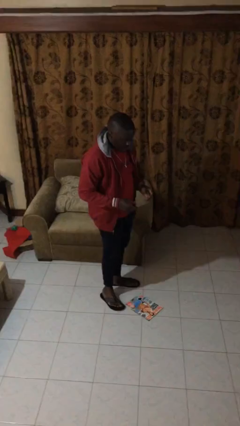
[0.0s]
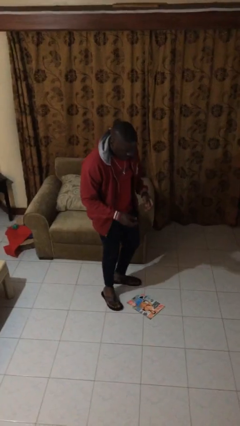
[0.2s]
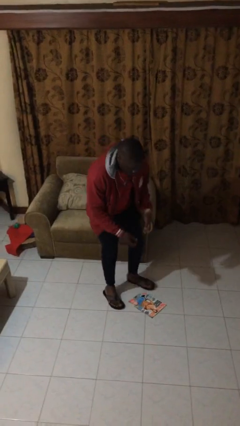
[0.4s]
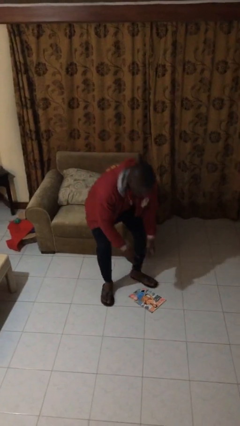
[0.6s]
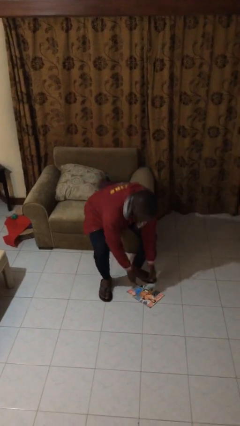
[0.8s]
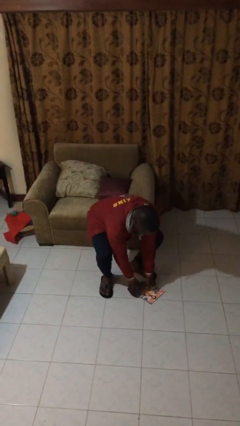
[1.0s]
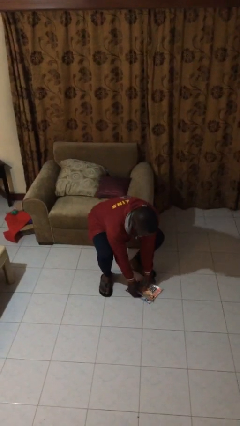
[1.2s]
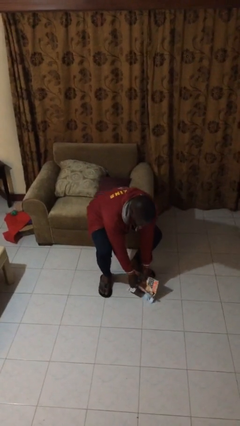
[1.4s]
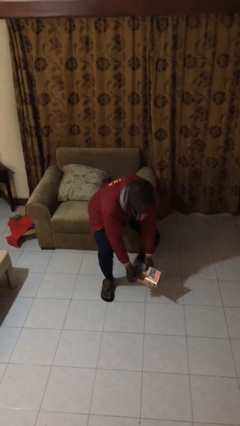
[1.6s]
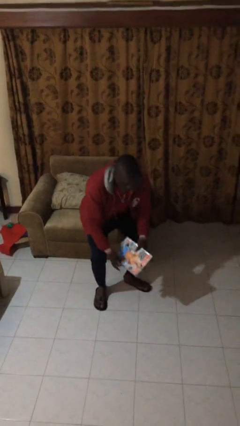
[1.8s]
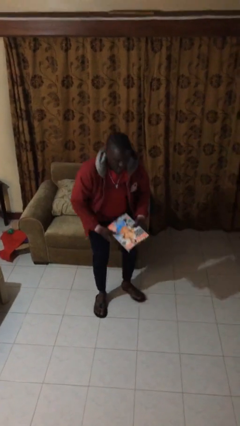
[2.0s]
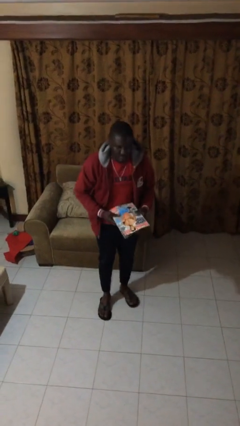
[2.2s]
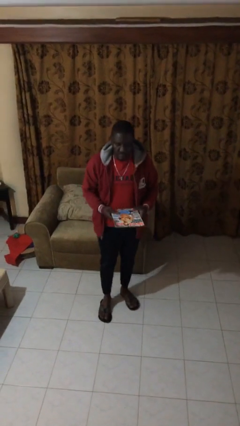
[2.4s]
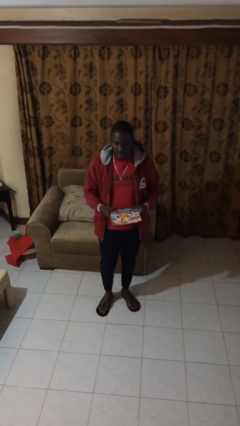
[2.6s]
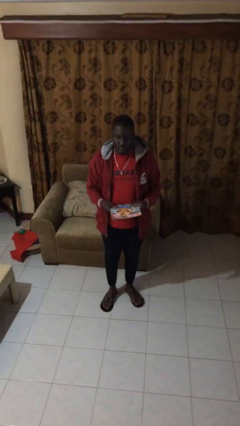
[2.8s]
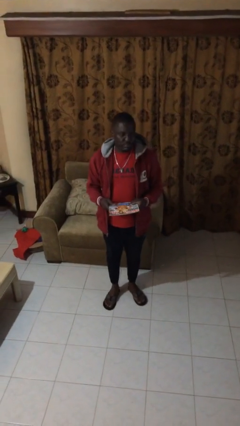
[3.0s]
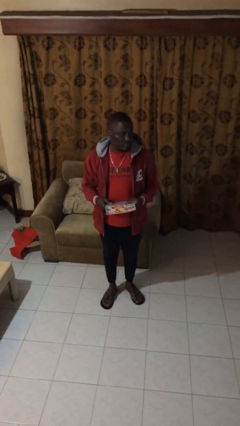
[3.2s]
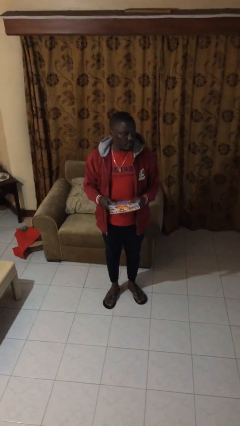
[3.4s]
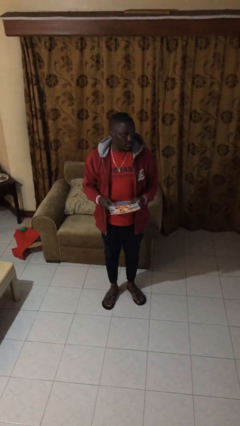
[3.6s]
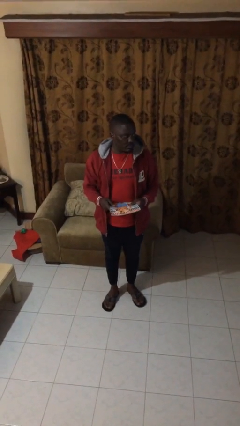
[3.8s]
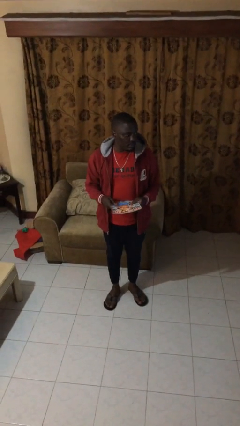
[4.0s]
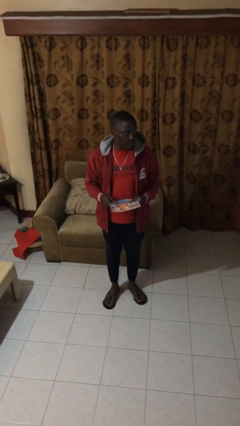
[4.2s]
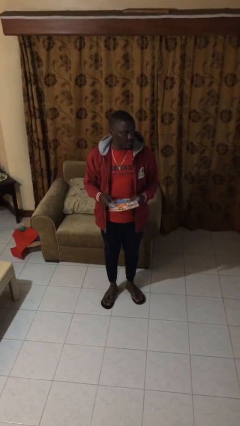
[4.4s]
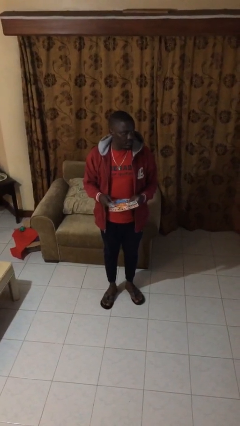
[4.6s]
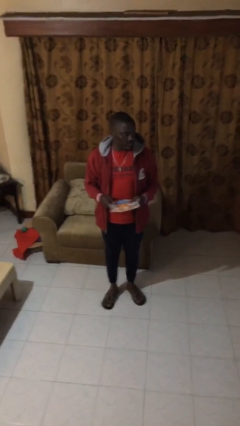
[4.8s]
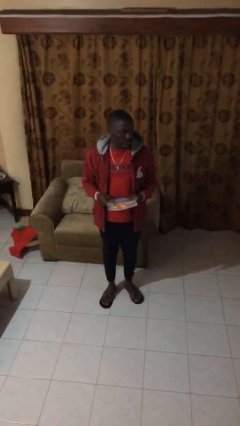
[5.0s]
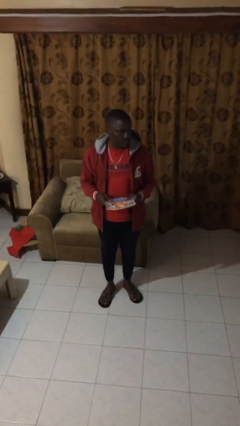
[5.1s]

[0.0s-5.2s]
person picks up object from floor

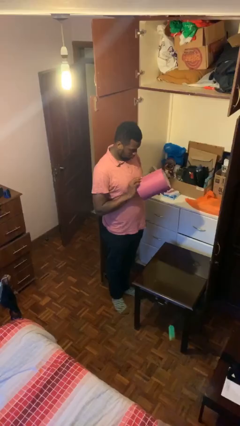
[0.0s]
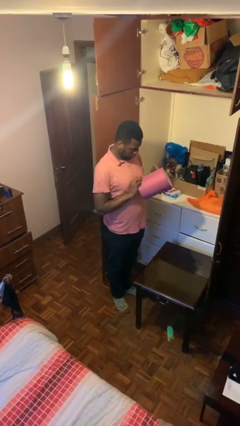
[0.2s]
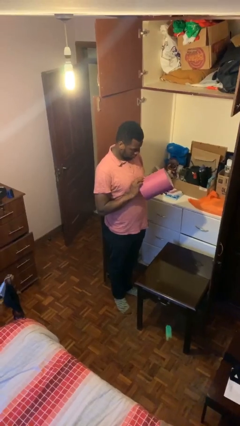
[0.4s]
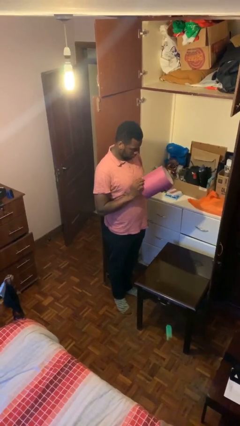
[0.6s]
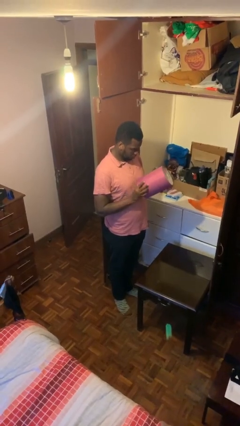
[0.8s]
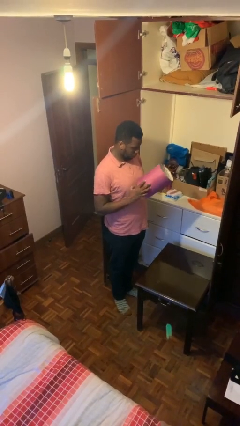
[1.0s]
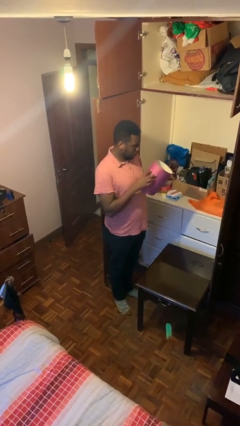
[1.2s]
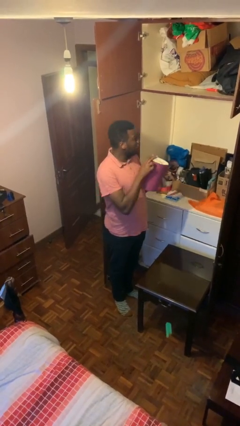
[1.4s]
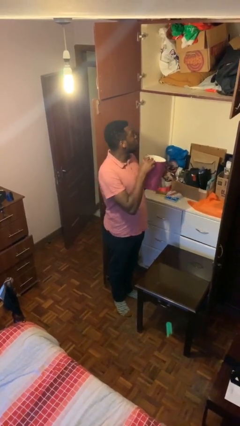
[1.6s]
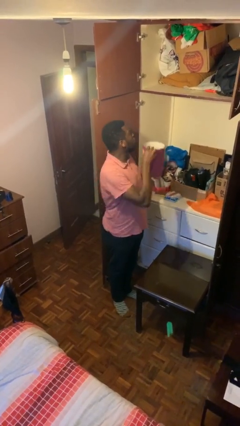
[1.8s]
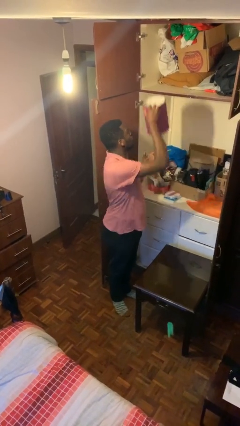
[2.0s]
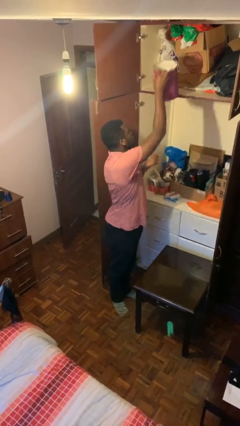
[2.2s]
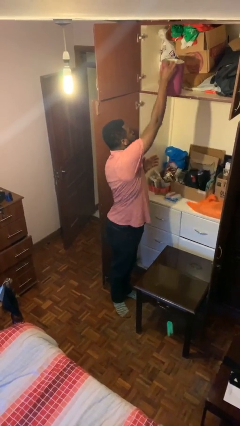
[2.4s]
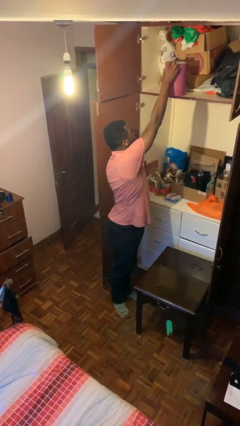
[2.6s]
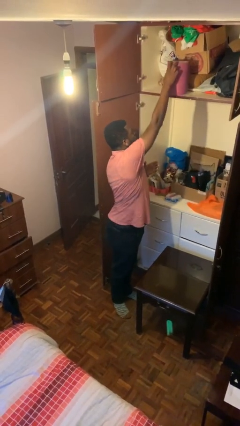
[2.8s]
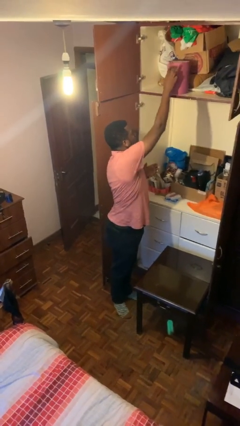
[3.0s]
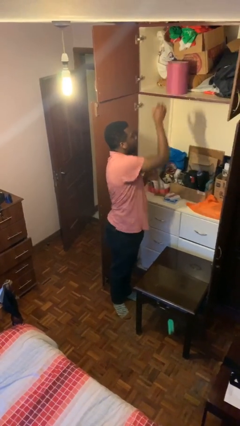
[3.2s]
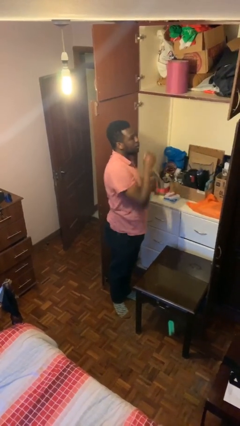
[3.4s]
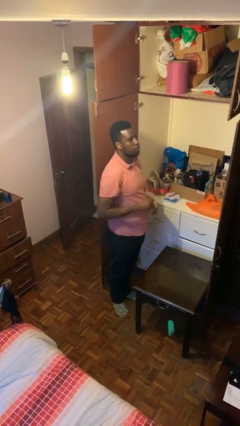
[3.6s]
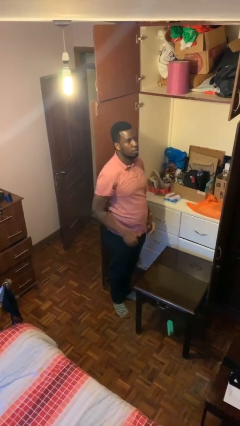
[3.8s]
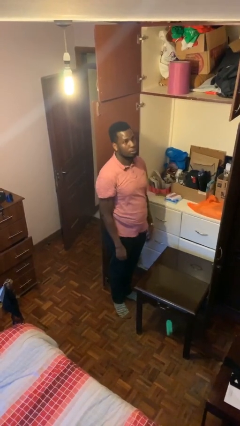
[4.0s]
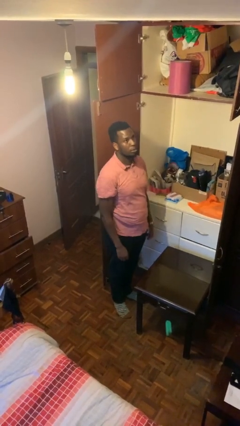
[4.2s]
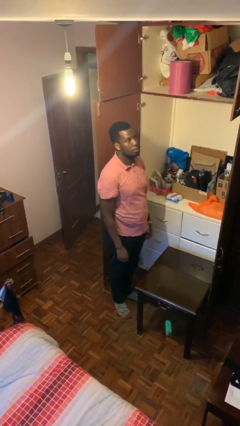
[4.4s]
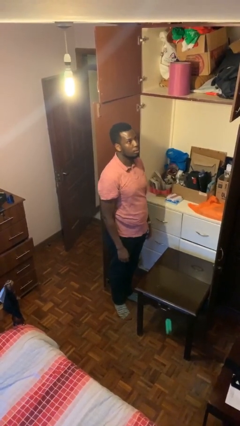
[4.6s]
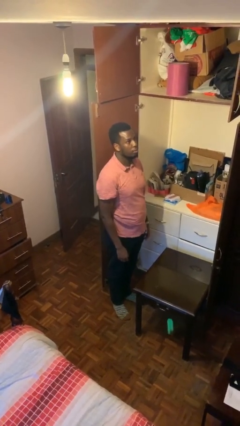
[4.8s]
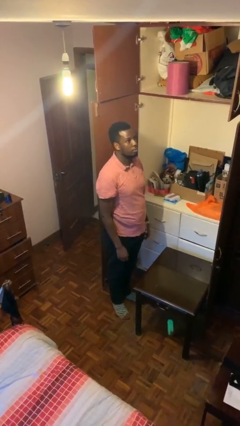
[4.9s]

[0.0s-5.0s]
person puts down object on shelf

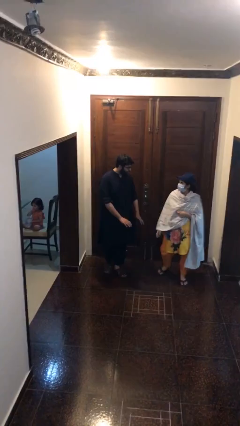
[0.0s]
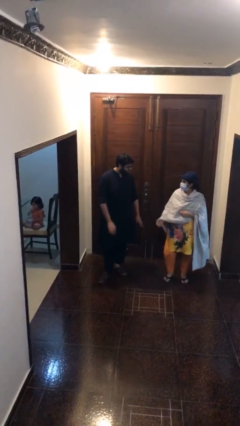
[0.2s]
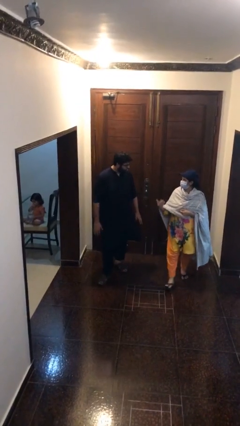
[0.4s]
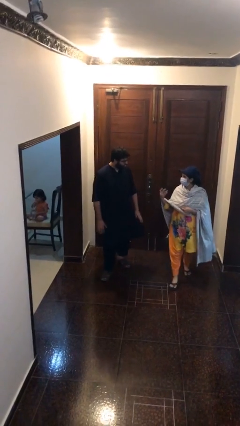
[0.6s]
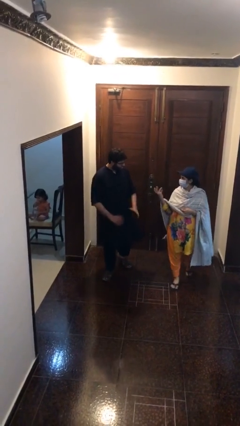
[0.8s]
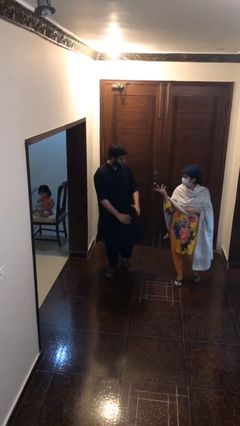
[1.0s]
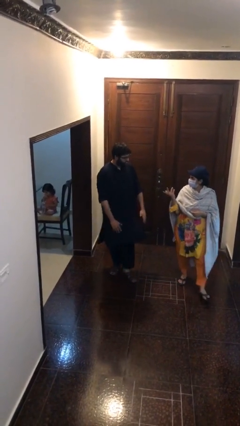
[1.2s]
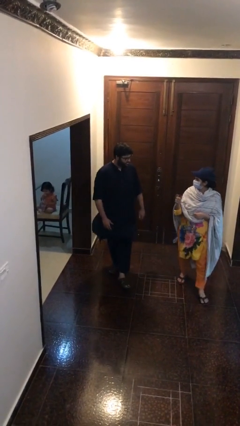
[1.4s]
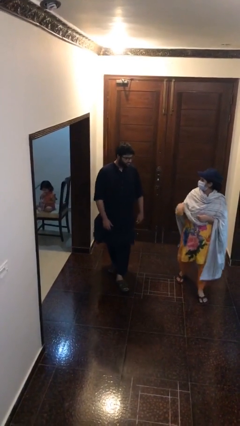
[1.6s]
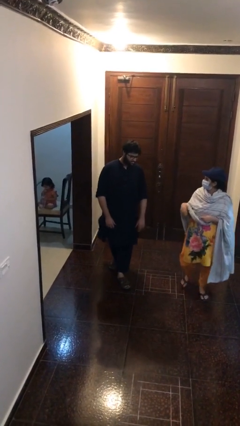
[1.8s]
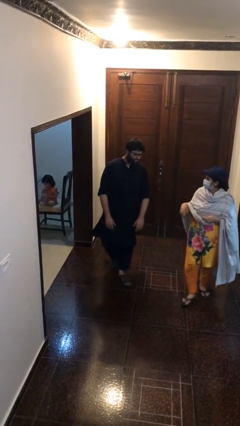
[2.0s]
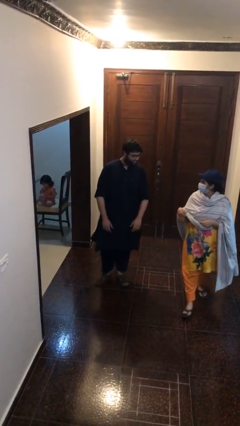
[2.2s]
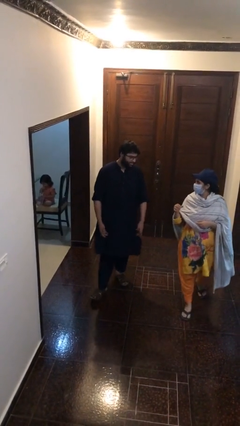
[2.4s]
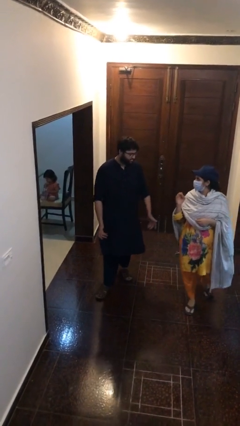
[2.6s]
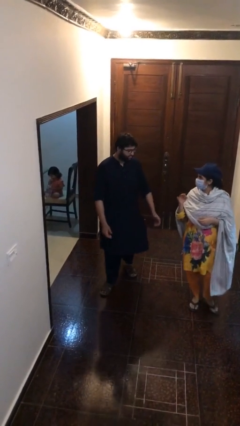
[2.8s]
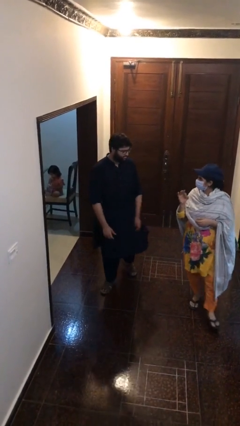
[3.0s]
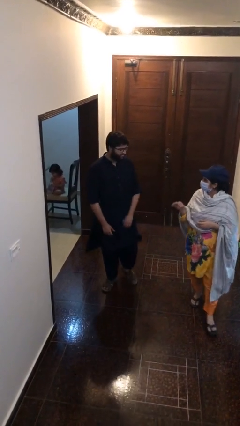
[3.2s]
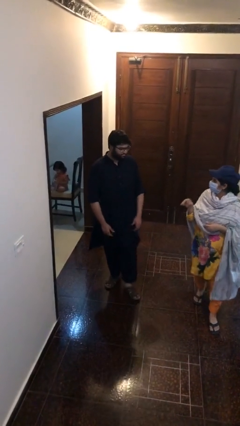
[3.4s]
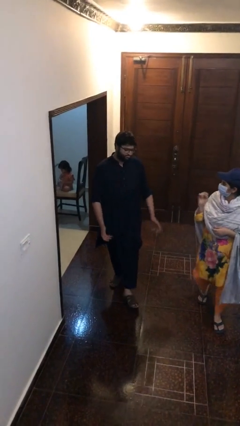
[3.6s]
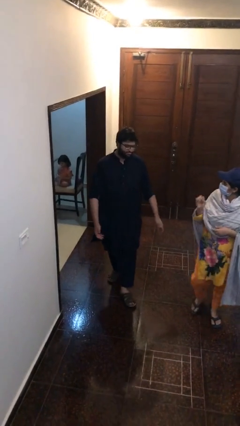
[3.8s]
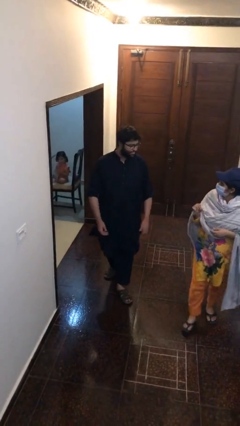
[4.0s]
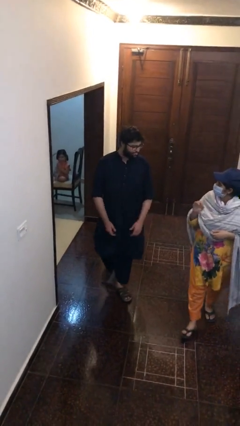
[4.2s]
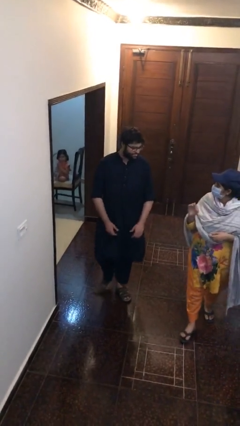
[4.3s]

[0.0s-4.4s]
person talks to person

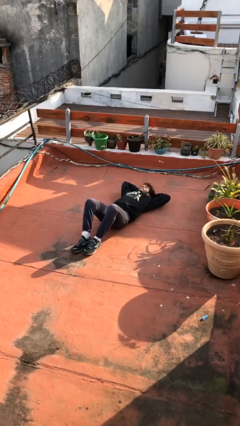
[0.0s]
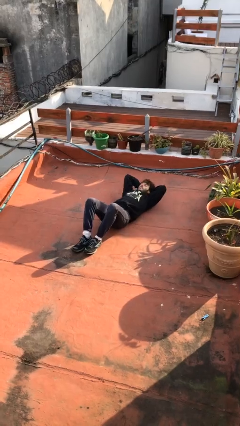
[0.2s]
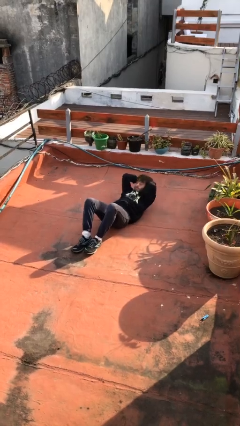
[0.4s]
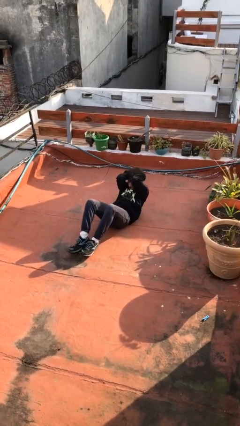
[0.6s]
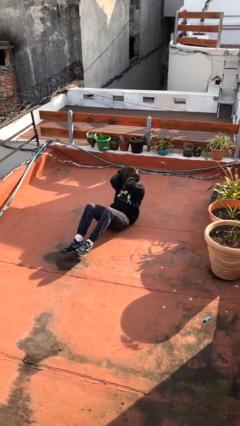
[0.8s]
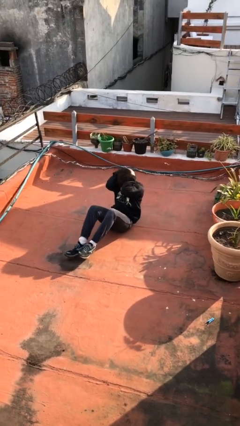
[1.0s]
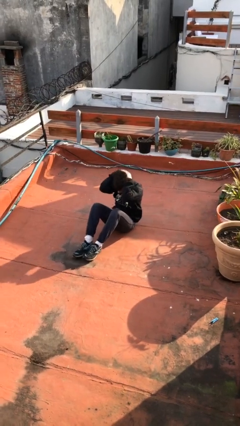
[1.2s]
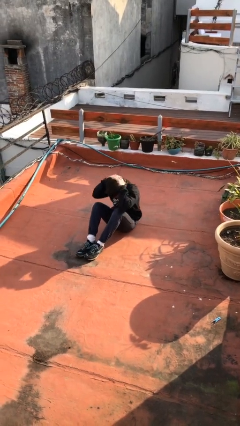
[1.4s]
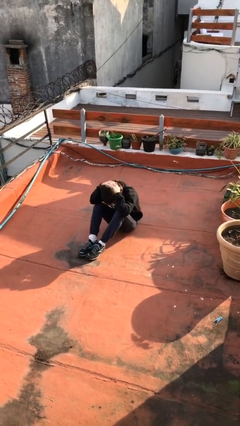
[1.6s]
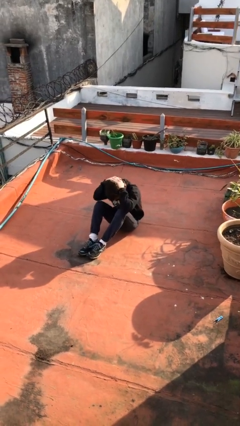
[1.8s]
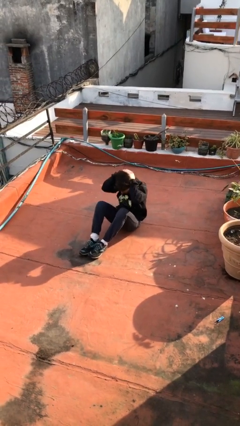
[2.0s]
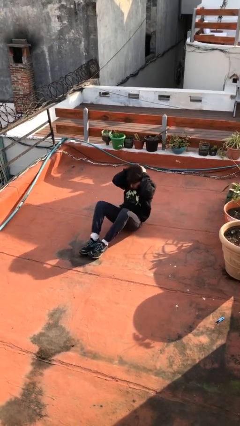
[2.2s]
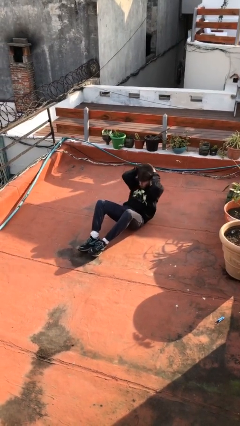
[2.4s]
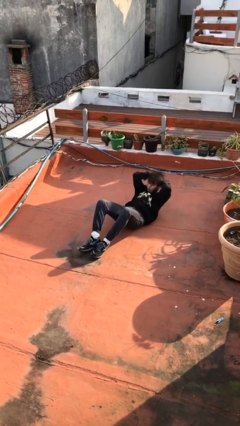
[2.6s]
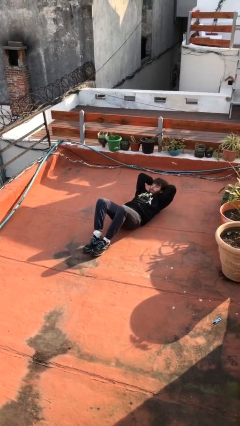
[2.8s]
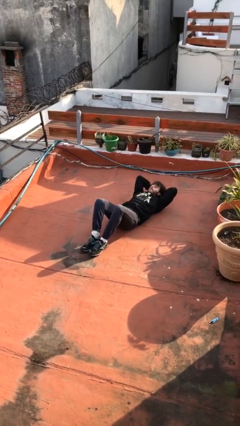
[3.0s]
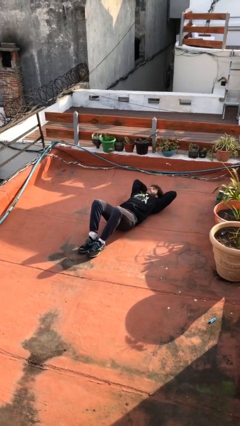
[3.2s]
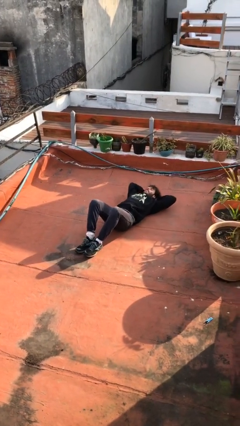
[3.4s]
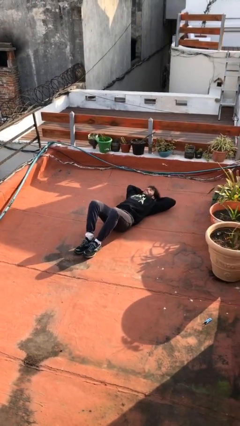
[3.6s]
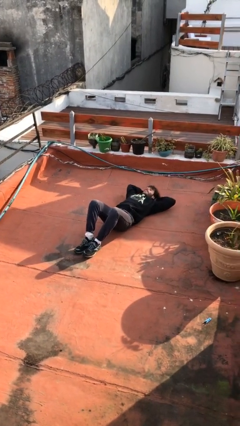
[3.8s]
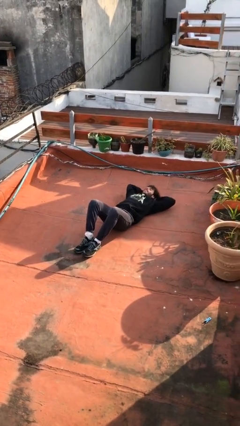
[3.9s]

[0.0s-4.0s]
person exercises with situp
